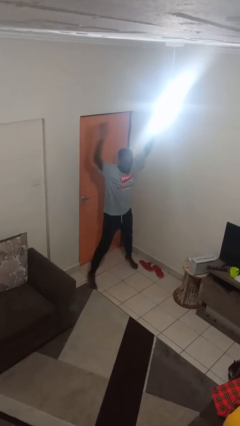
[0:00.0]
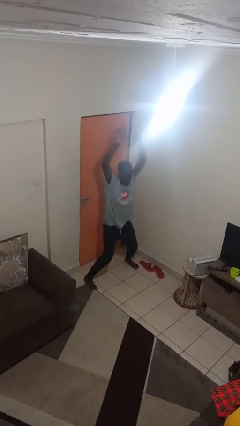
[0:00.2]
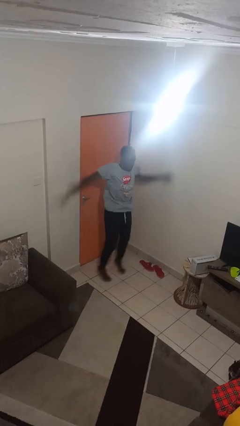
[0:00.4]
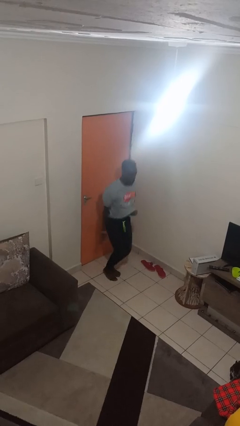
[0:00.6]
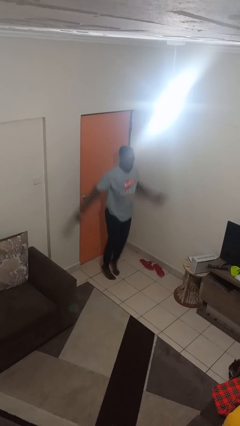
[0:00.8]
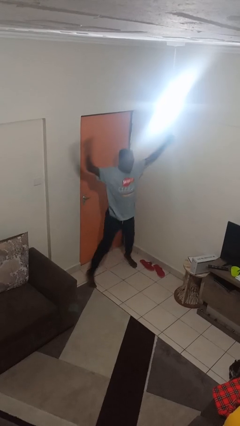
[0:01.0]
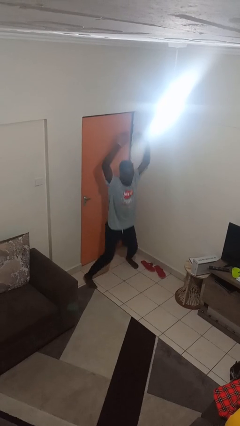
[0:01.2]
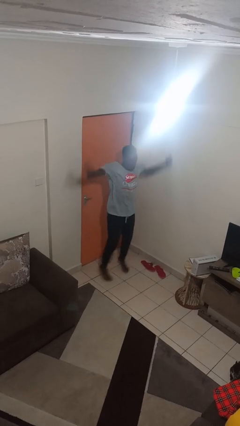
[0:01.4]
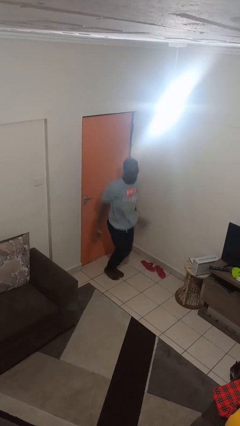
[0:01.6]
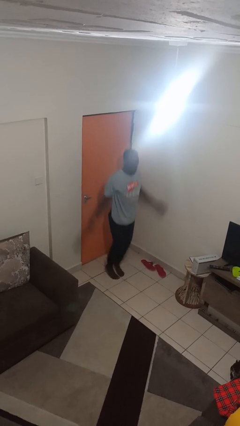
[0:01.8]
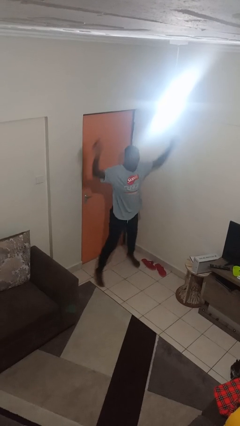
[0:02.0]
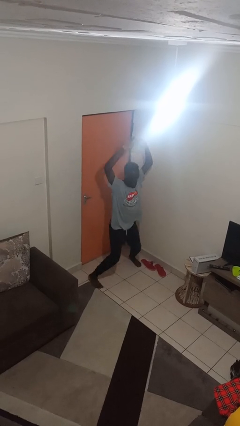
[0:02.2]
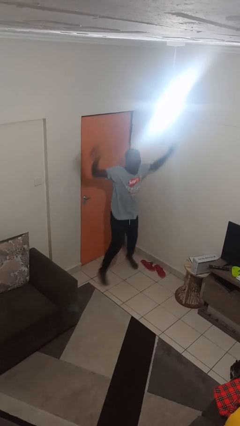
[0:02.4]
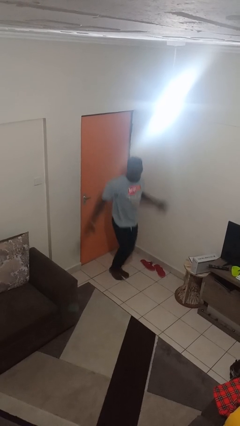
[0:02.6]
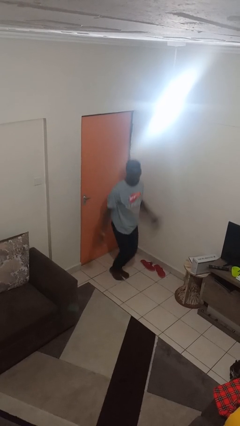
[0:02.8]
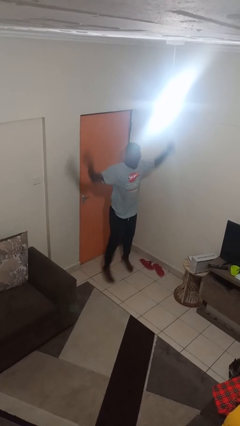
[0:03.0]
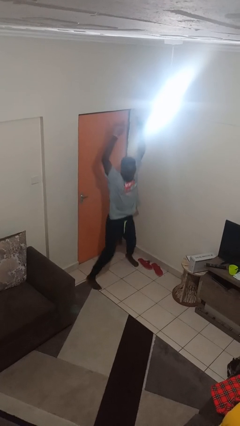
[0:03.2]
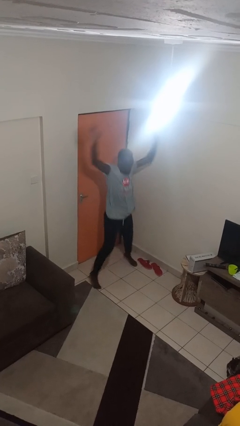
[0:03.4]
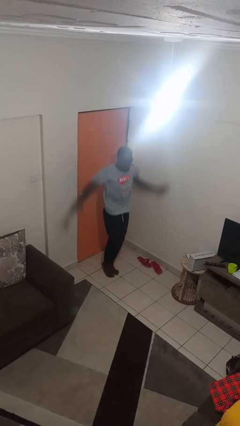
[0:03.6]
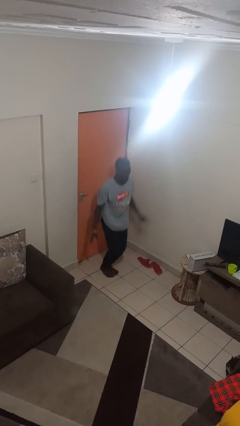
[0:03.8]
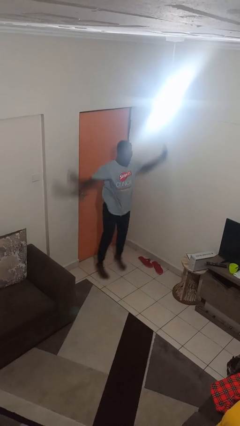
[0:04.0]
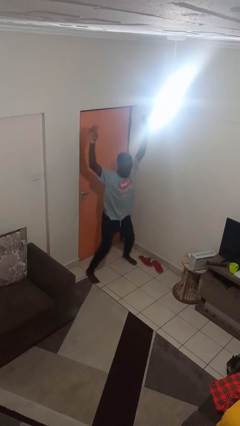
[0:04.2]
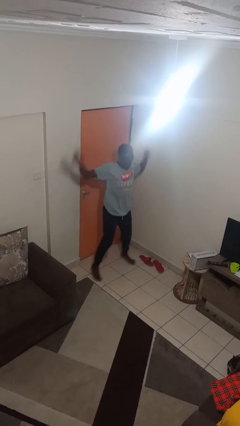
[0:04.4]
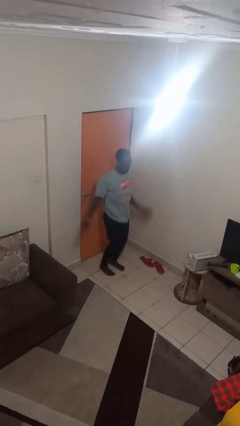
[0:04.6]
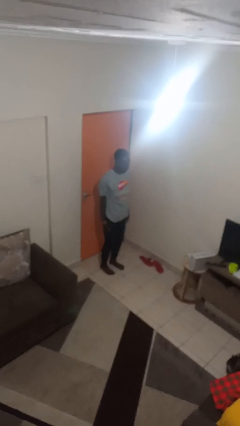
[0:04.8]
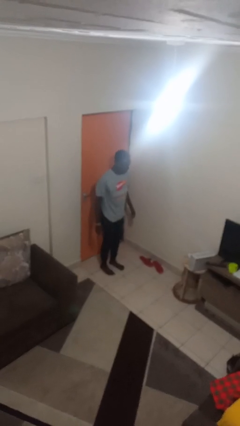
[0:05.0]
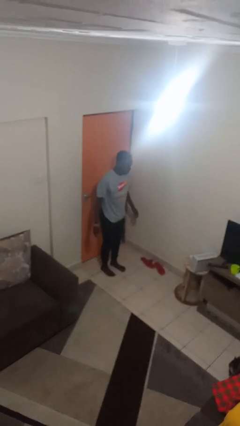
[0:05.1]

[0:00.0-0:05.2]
person exercises with jumping jacks

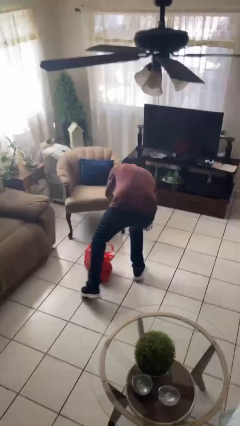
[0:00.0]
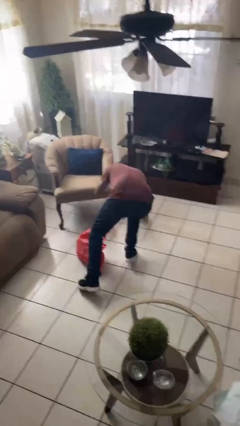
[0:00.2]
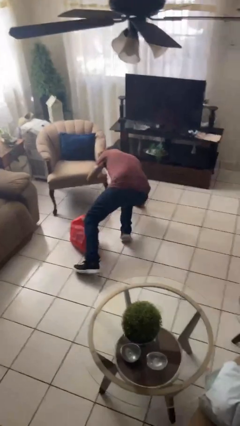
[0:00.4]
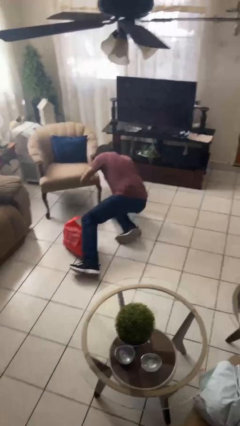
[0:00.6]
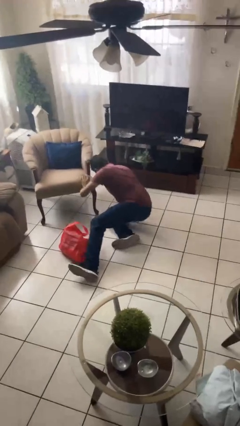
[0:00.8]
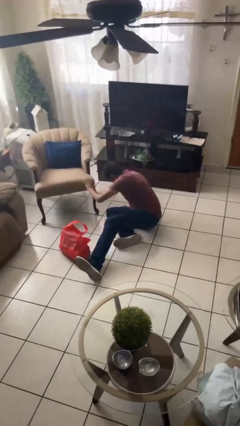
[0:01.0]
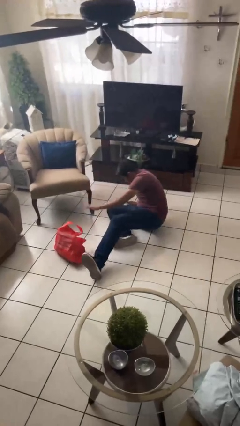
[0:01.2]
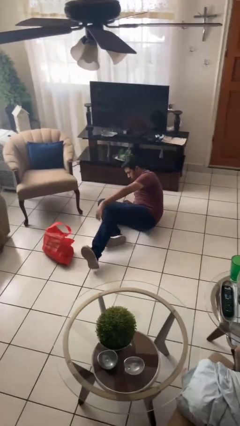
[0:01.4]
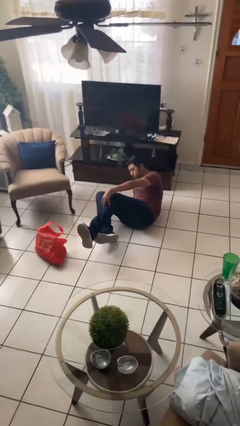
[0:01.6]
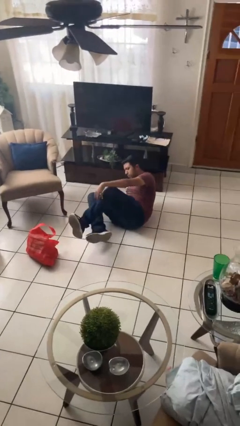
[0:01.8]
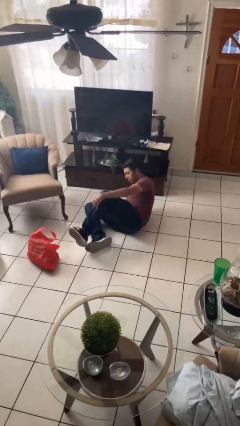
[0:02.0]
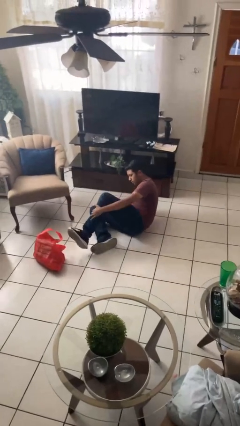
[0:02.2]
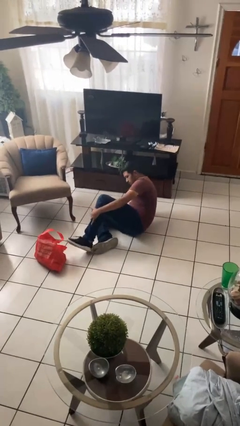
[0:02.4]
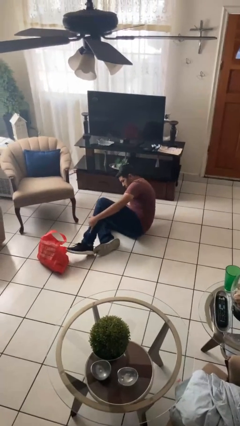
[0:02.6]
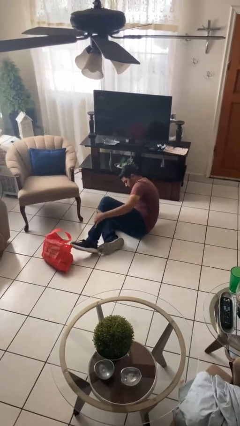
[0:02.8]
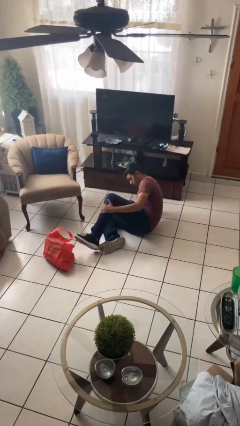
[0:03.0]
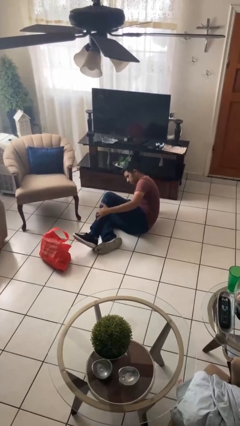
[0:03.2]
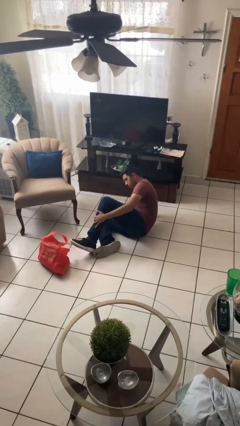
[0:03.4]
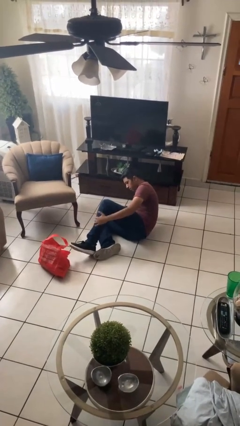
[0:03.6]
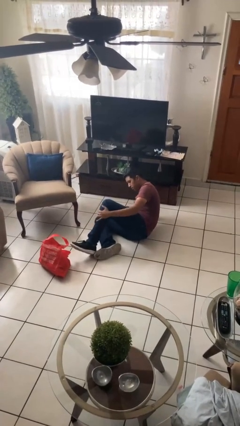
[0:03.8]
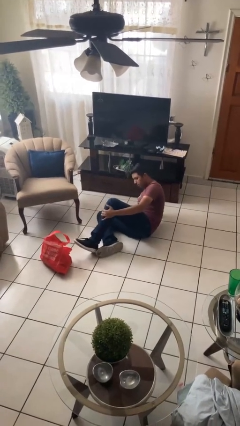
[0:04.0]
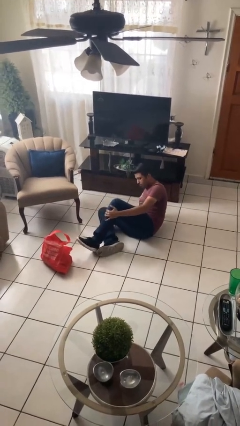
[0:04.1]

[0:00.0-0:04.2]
person lies down on floor

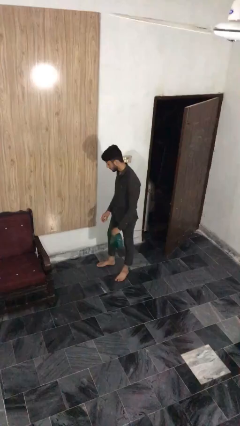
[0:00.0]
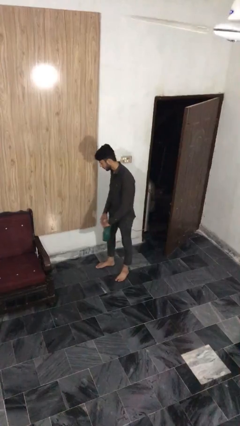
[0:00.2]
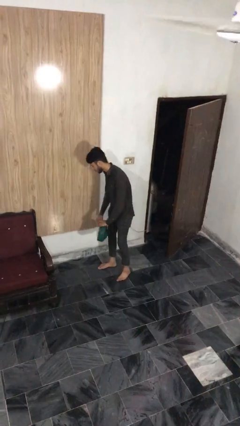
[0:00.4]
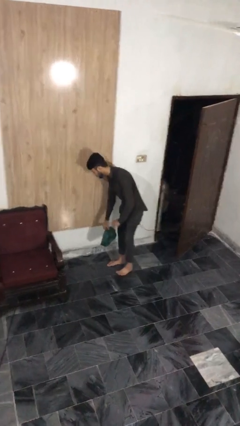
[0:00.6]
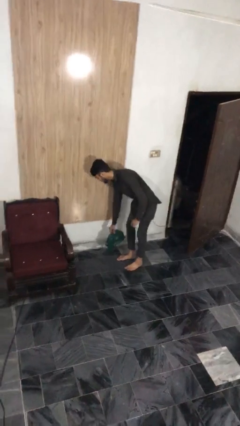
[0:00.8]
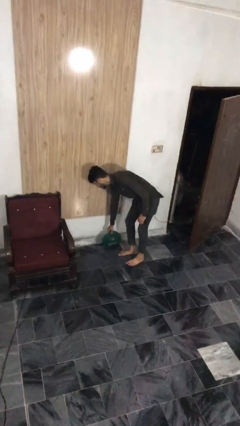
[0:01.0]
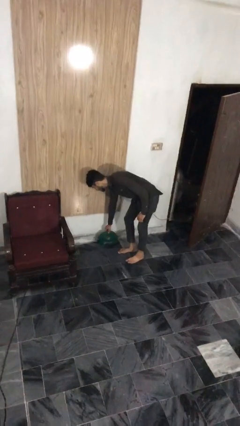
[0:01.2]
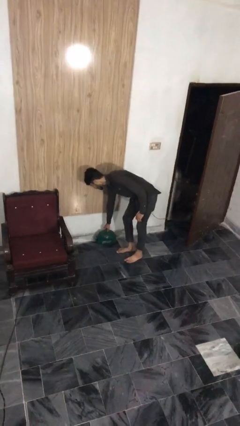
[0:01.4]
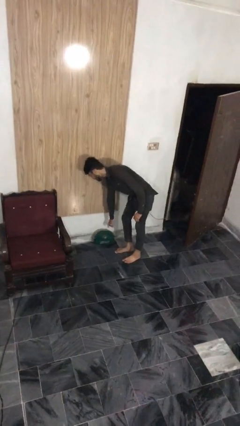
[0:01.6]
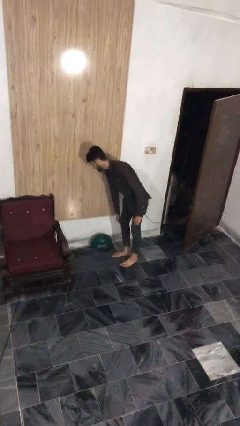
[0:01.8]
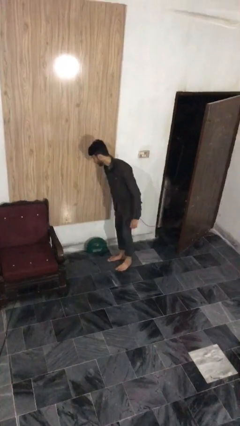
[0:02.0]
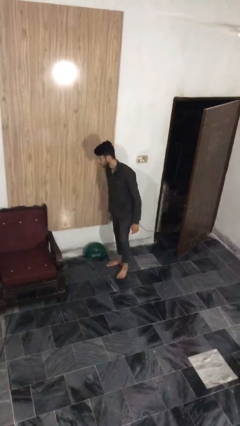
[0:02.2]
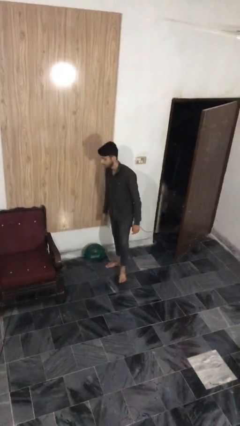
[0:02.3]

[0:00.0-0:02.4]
person puts down object on floor

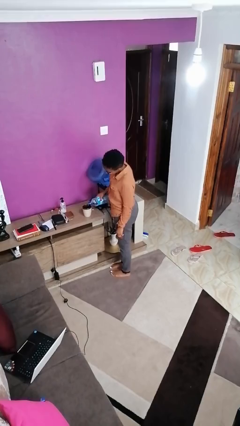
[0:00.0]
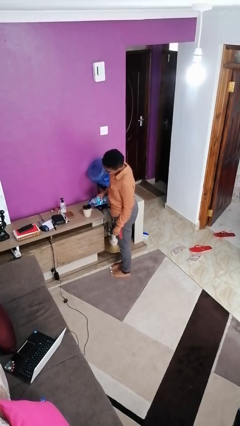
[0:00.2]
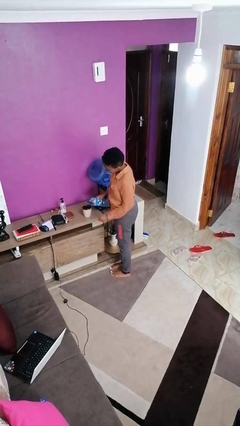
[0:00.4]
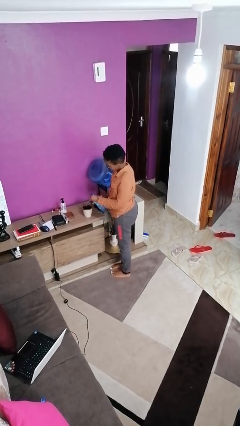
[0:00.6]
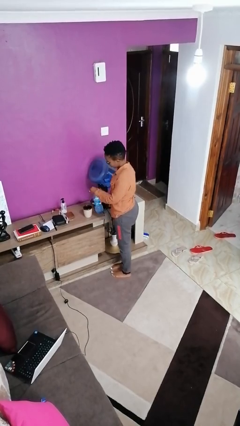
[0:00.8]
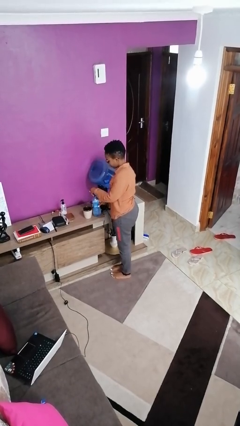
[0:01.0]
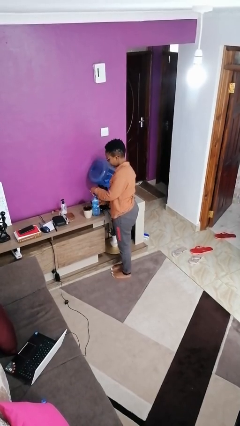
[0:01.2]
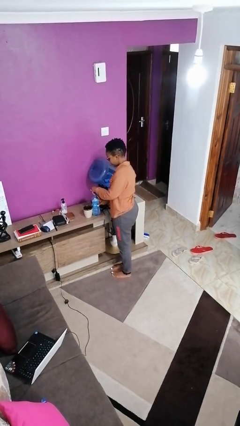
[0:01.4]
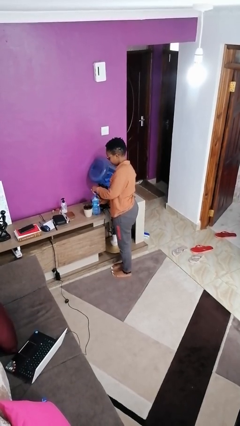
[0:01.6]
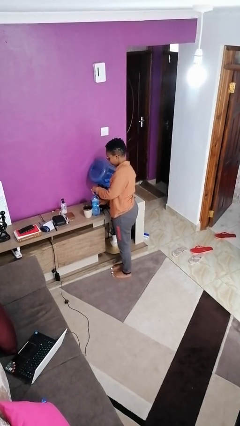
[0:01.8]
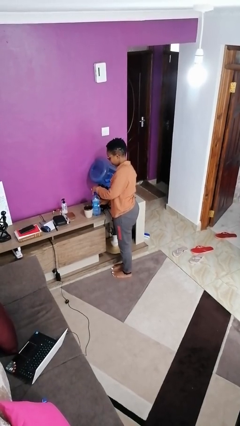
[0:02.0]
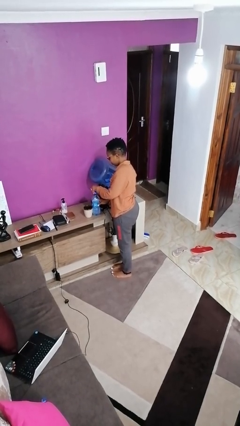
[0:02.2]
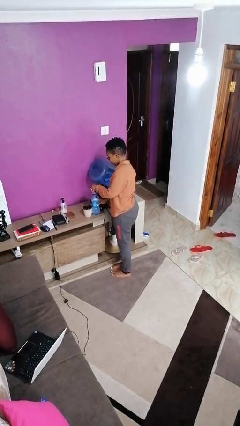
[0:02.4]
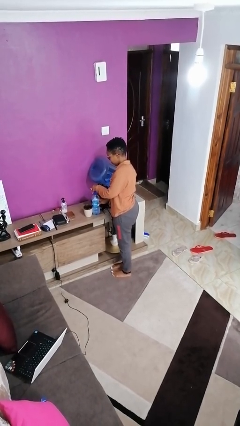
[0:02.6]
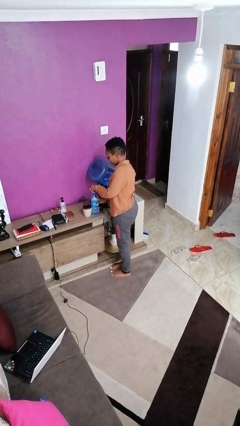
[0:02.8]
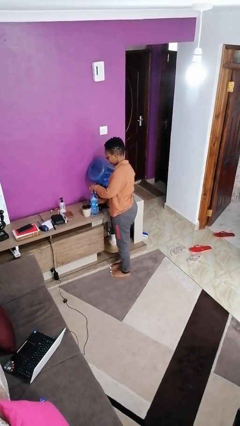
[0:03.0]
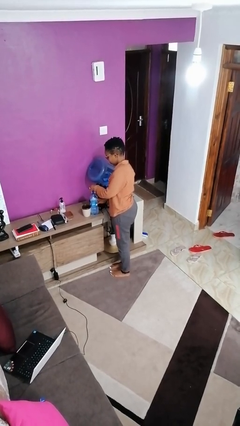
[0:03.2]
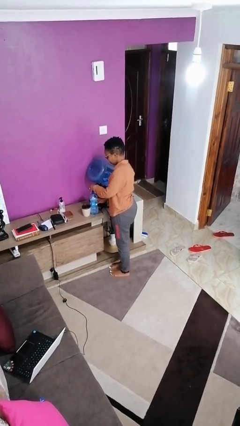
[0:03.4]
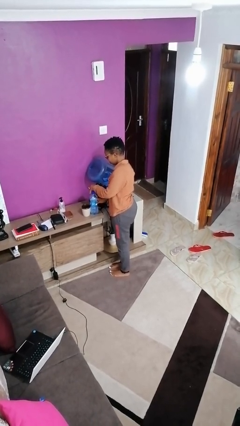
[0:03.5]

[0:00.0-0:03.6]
person screws lid to bottle

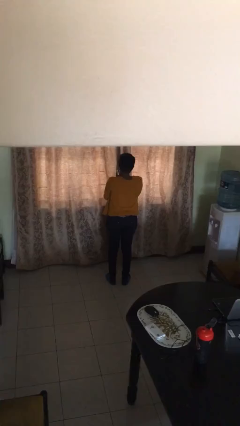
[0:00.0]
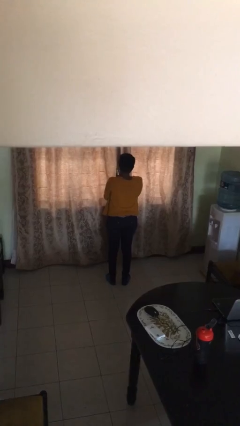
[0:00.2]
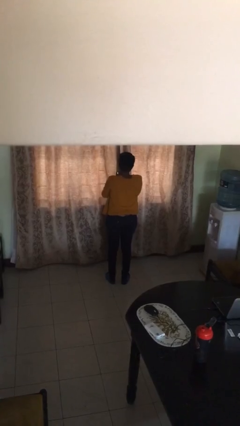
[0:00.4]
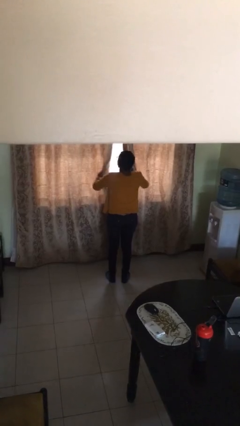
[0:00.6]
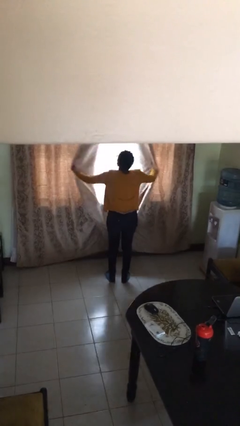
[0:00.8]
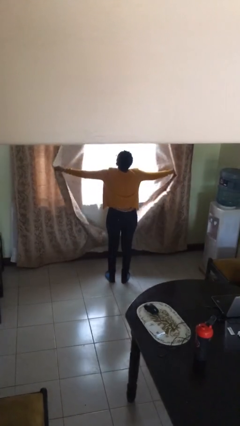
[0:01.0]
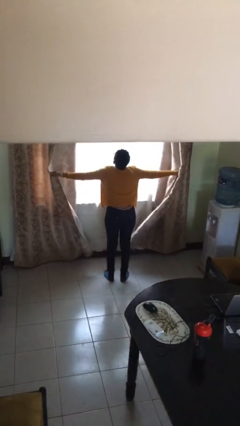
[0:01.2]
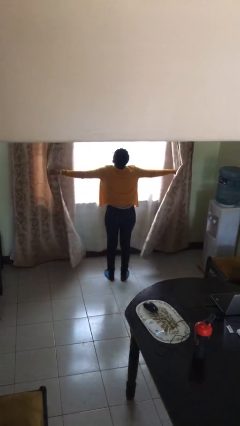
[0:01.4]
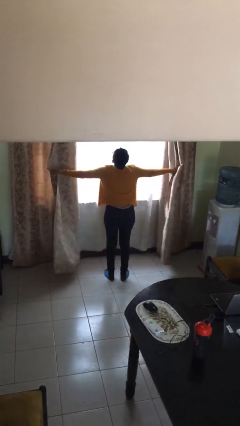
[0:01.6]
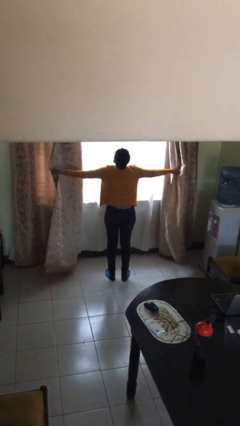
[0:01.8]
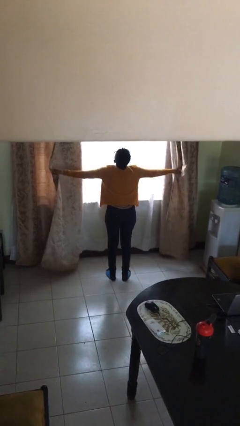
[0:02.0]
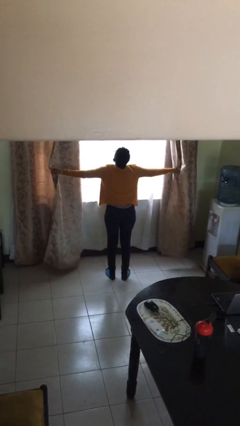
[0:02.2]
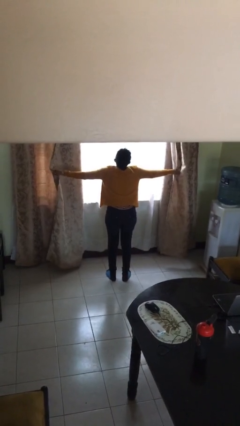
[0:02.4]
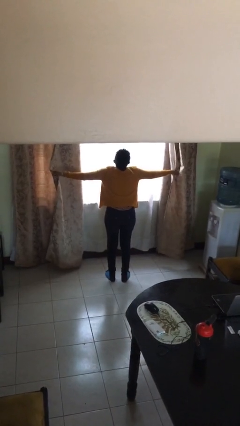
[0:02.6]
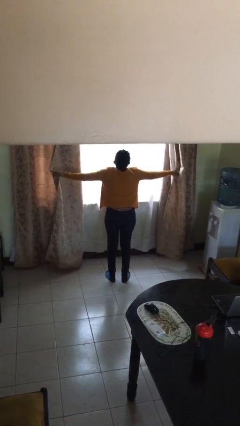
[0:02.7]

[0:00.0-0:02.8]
person opens curtains
